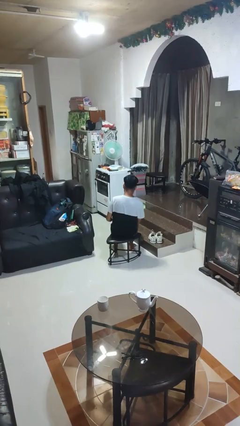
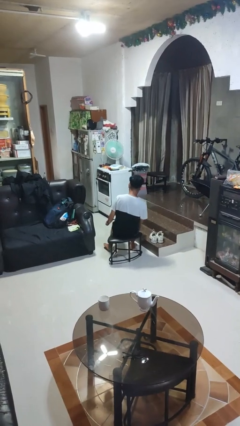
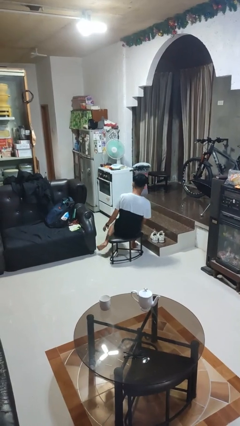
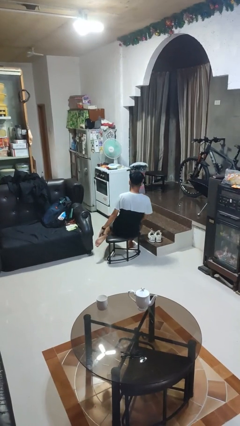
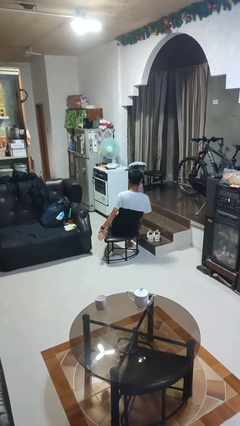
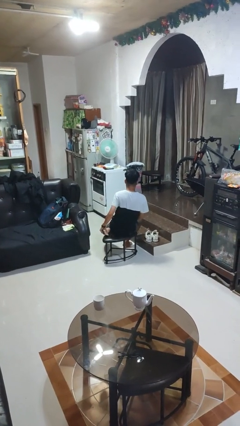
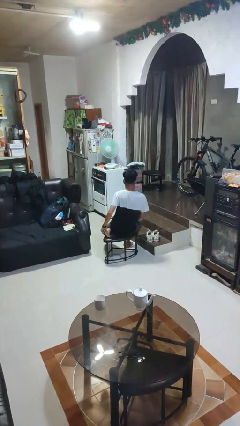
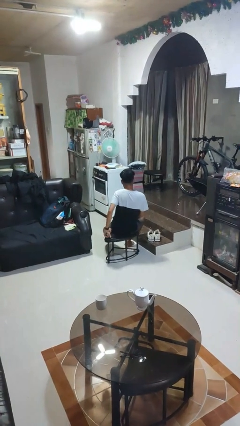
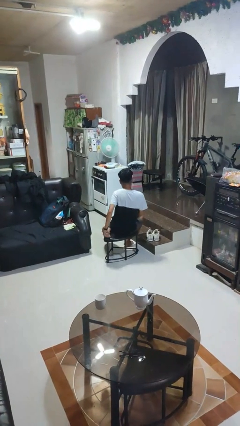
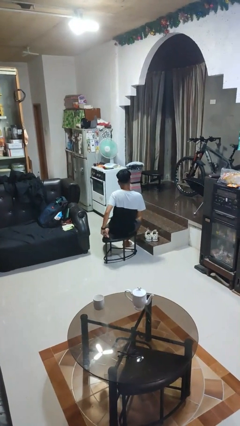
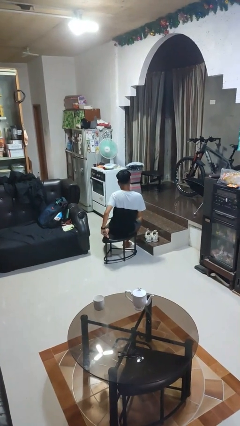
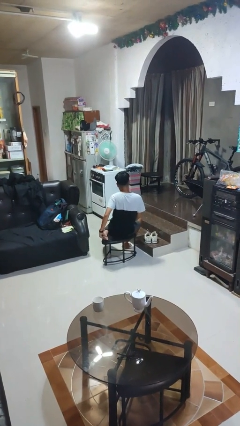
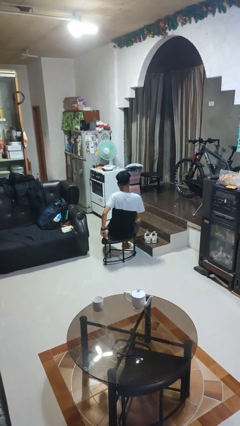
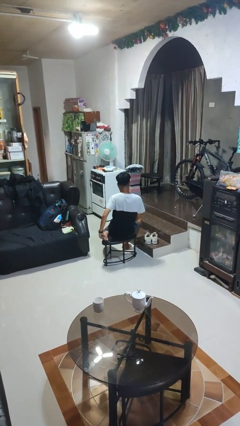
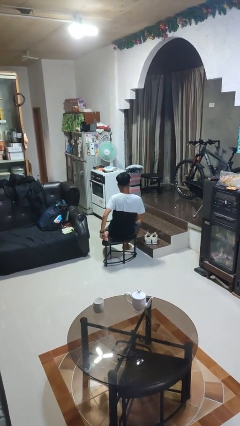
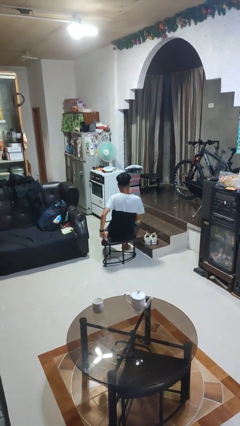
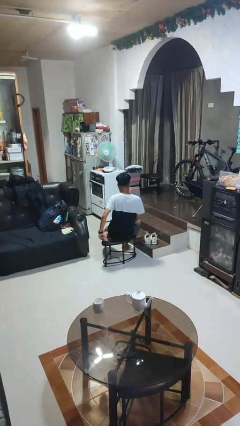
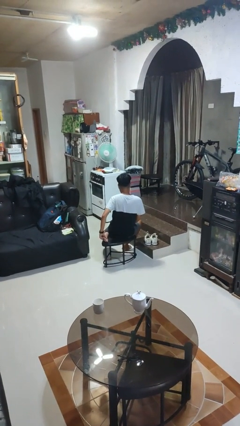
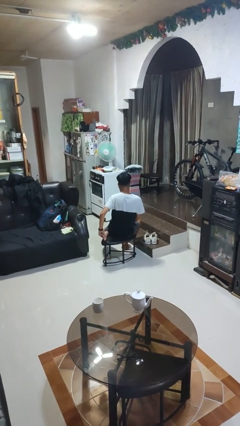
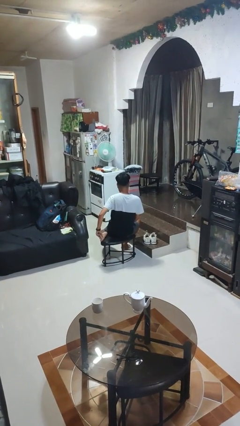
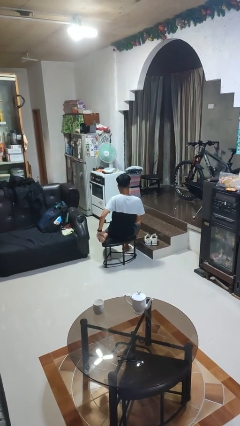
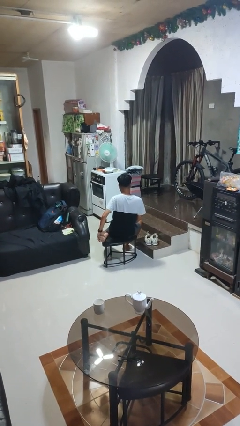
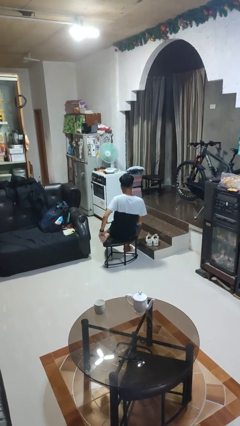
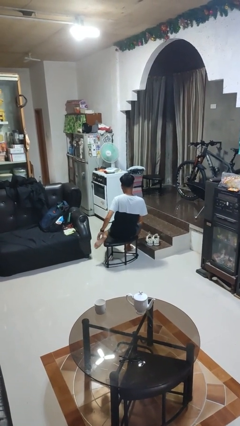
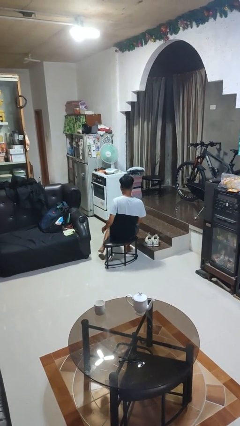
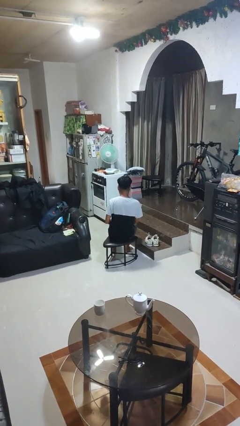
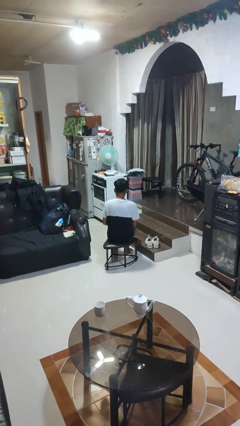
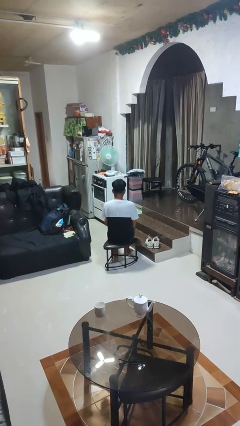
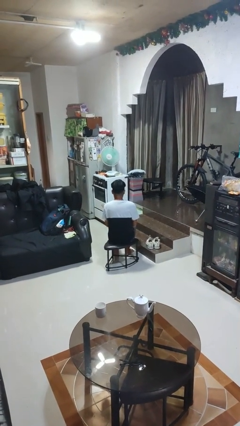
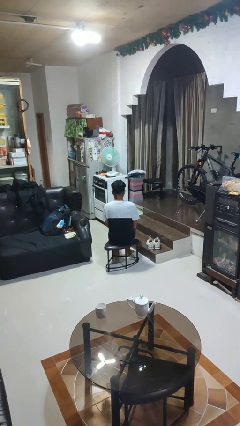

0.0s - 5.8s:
person rubs foot

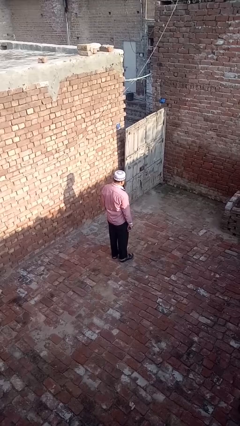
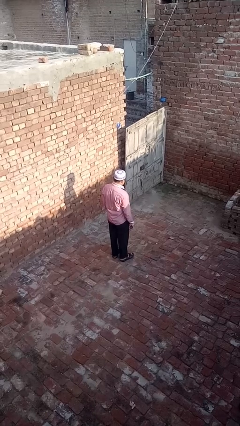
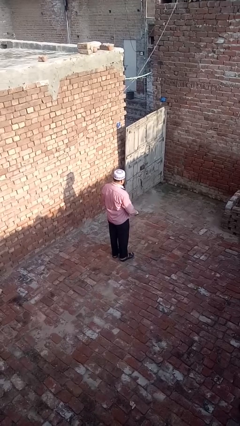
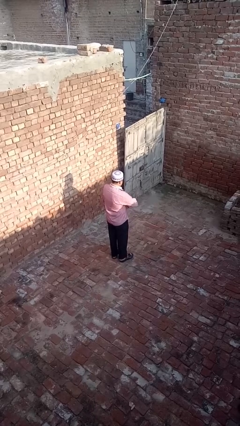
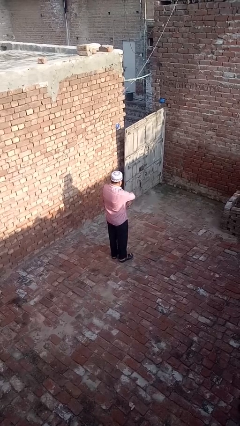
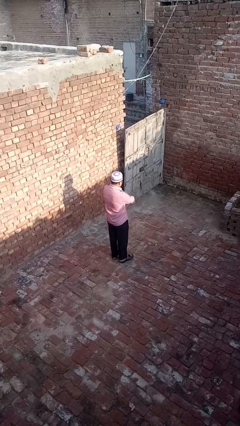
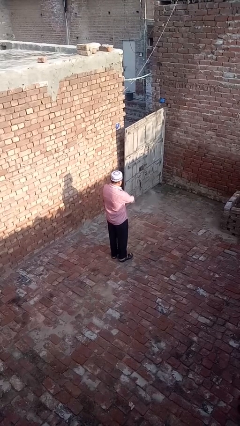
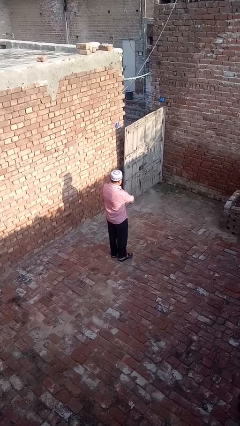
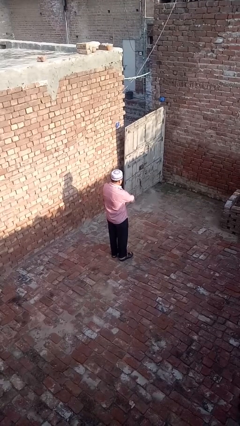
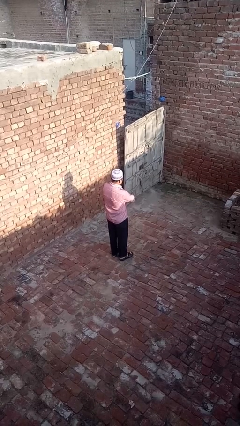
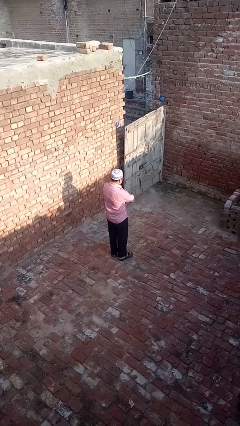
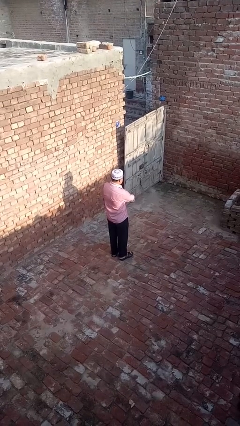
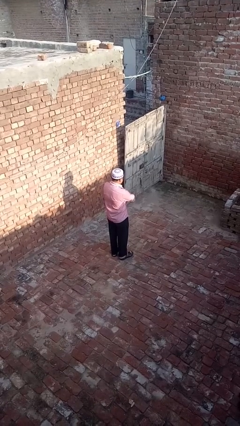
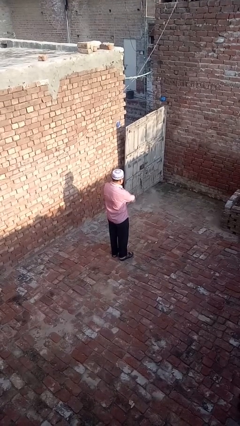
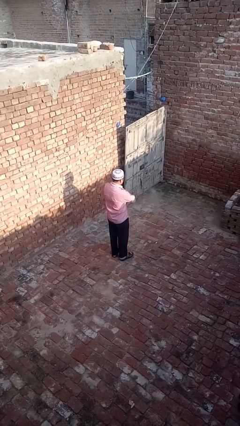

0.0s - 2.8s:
person crosses arms

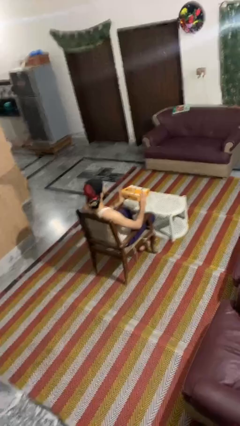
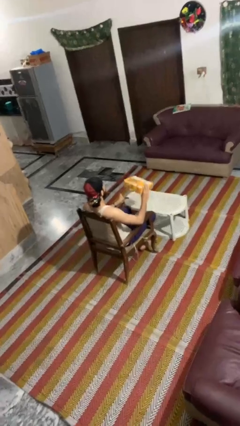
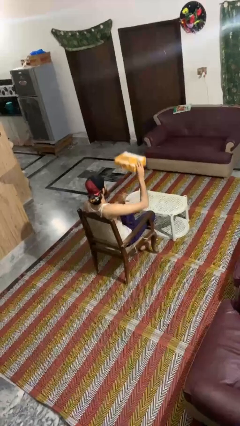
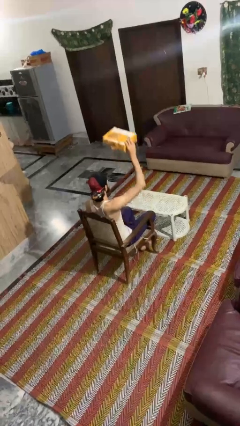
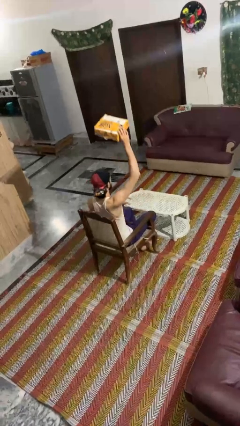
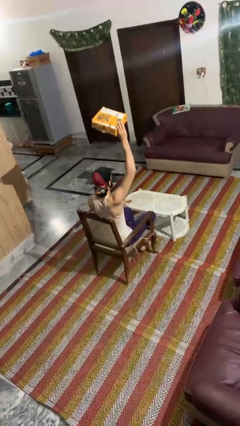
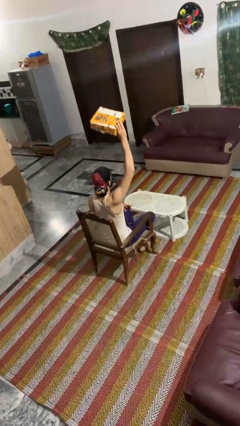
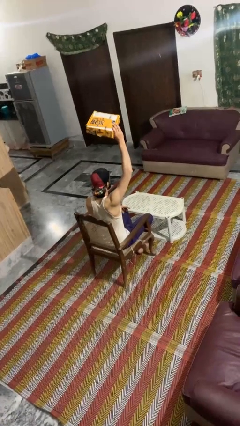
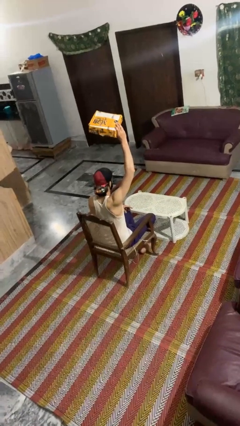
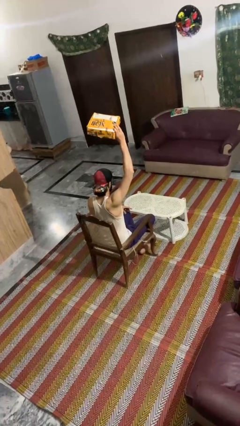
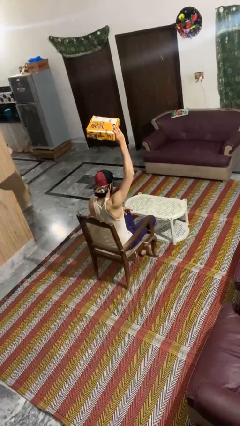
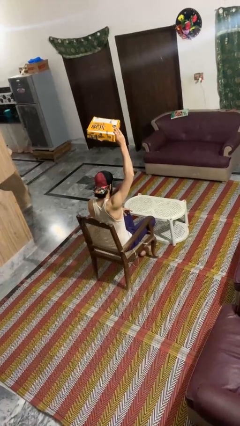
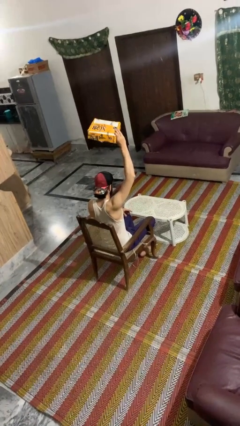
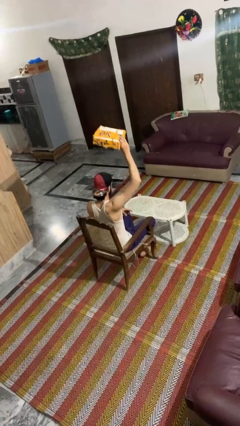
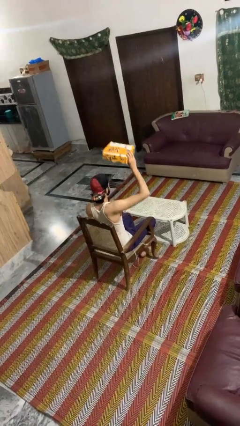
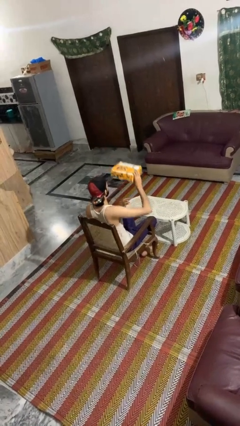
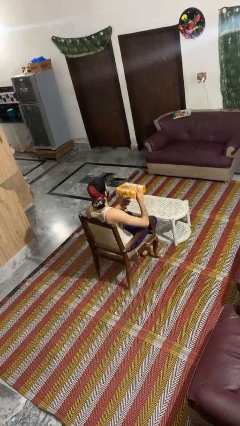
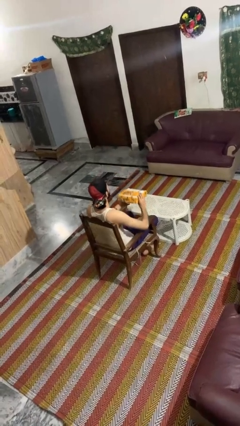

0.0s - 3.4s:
person holds object above head

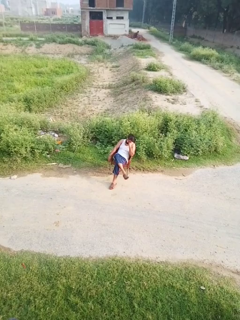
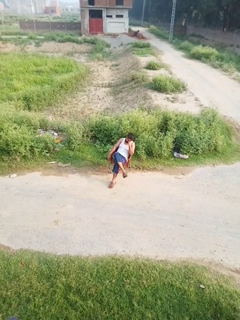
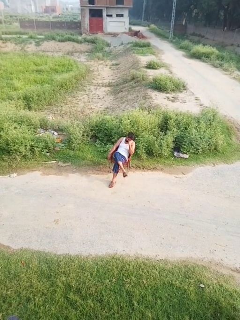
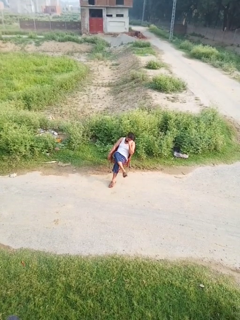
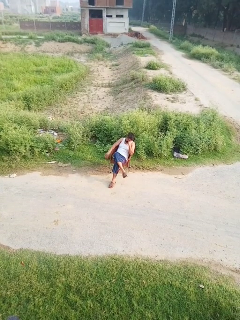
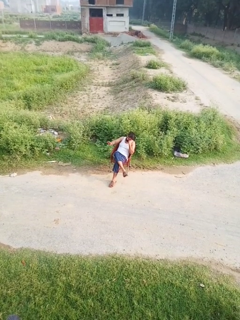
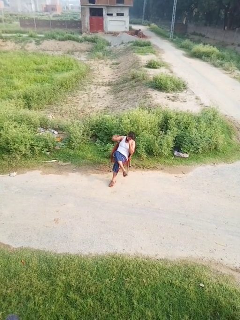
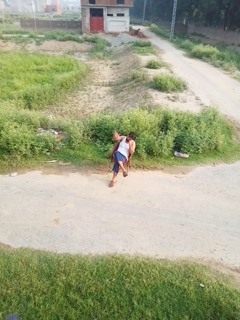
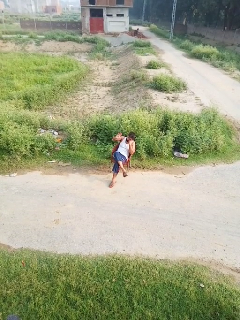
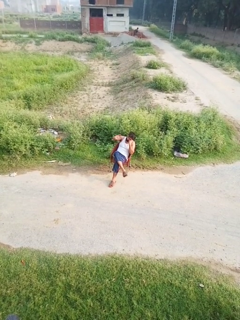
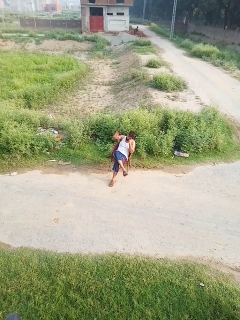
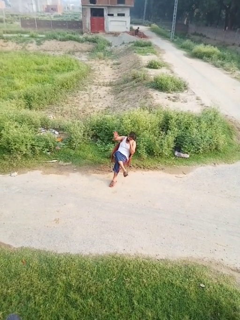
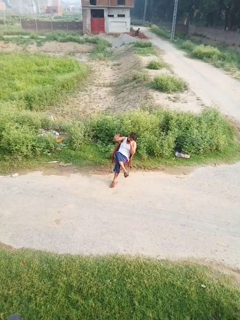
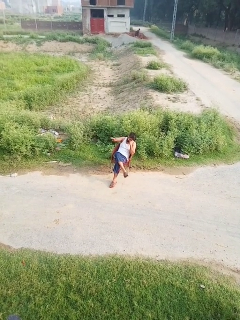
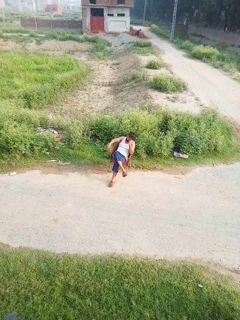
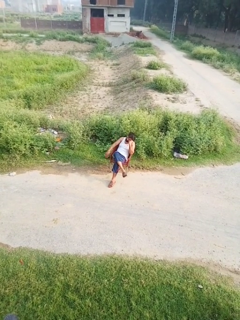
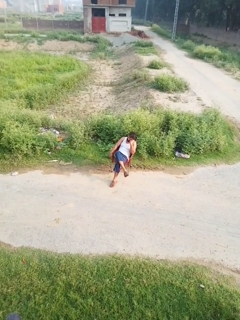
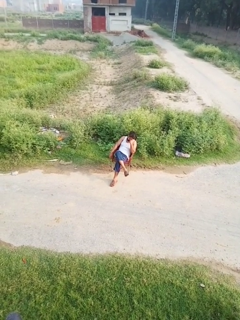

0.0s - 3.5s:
person waves at person

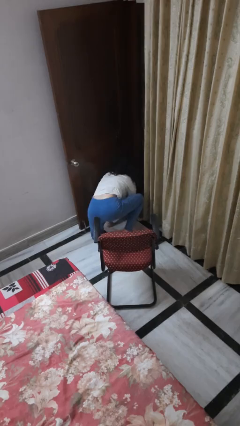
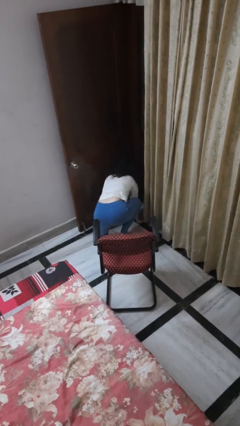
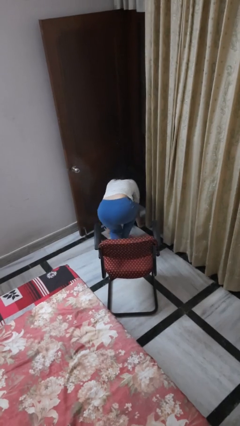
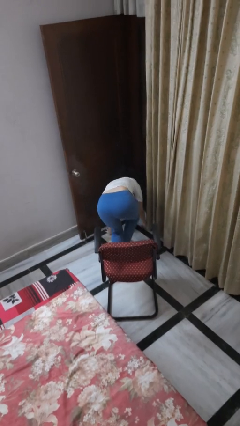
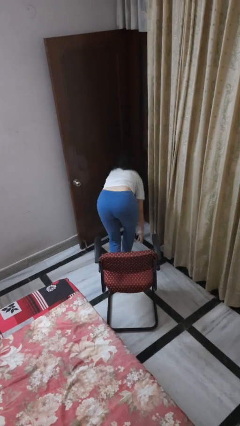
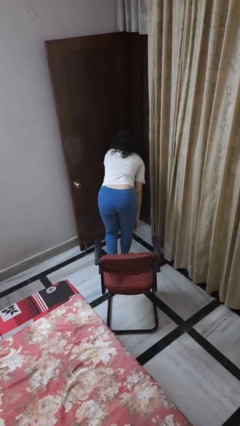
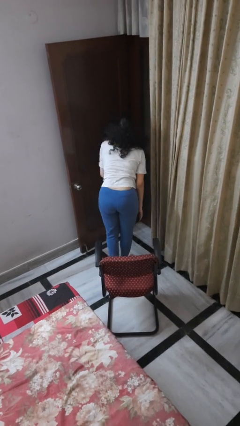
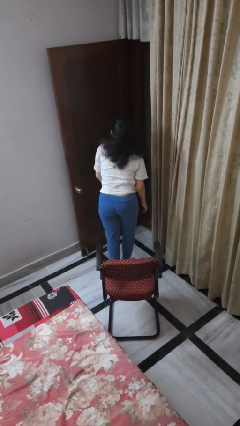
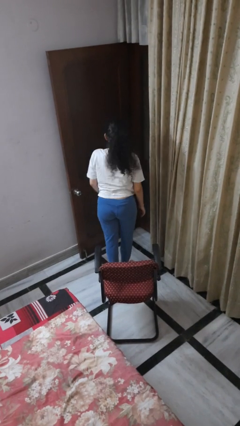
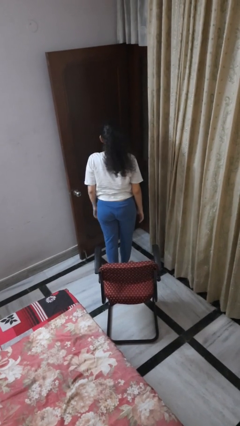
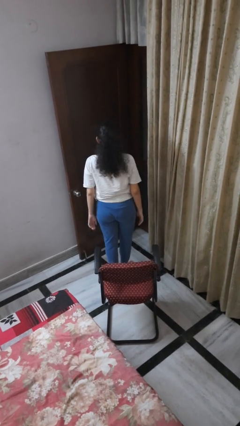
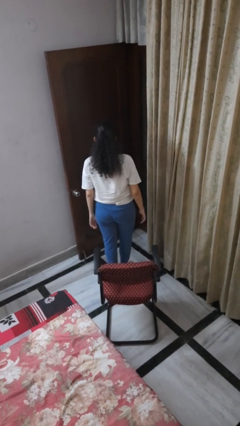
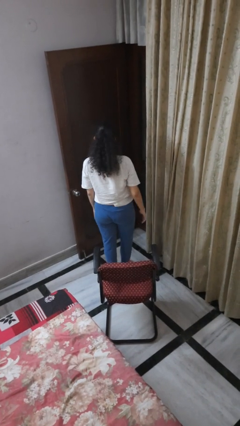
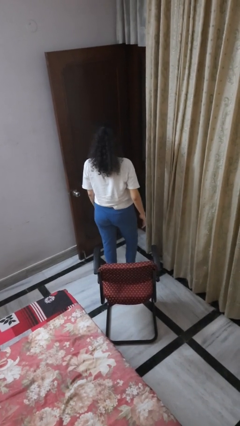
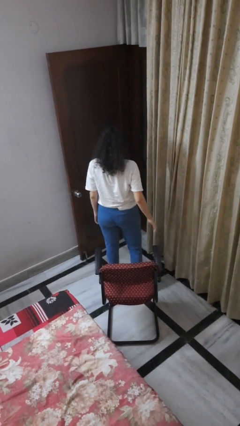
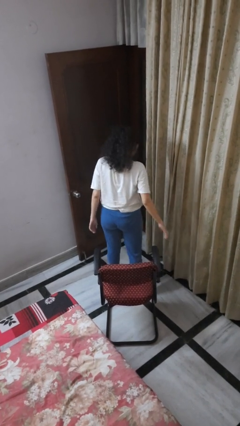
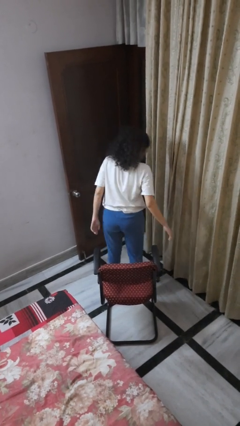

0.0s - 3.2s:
person stands up from floor
